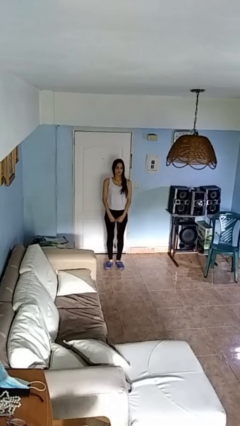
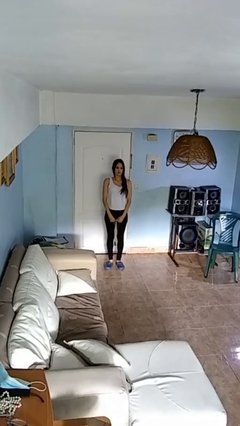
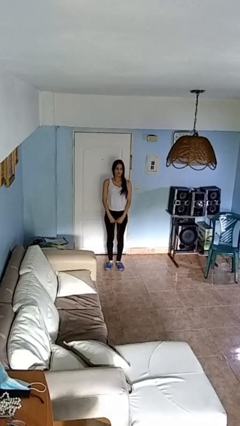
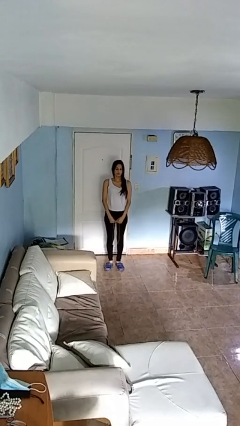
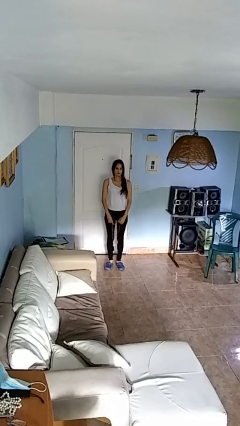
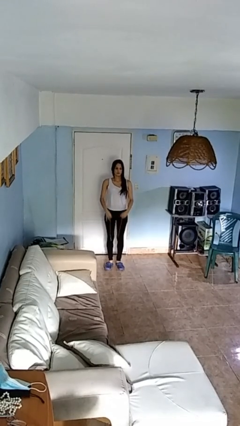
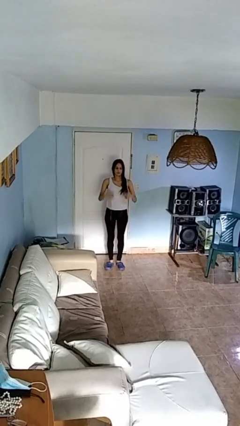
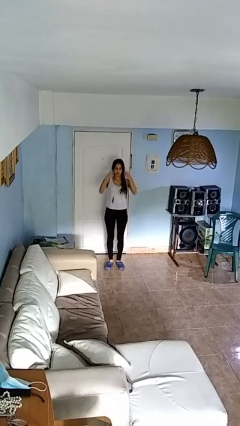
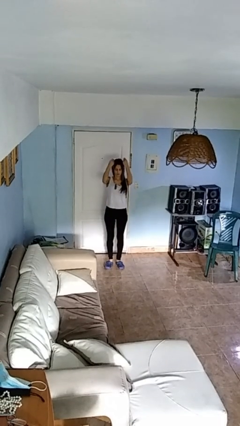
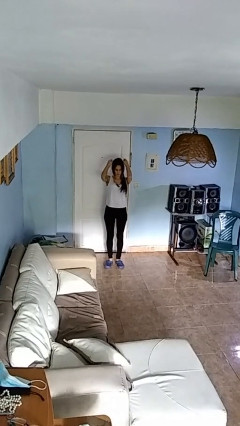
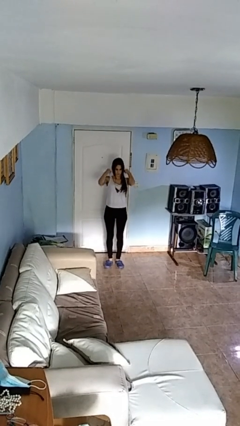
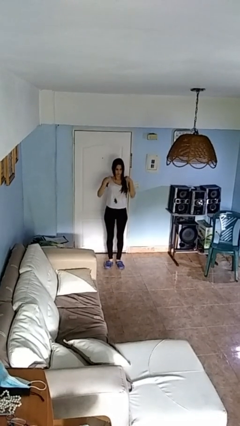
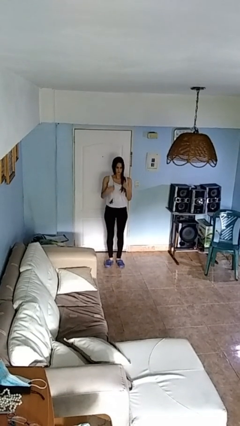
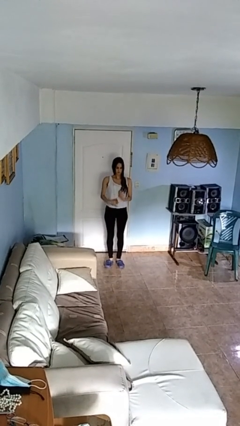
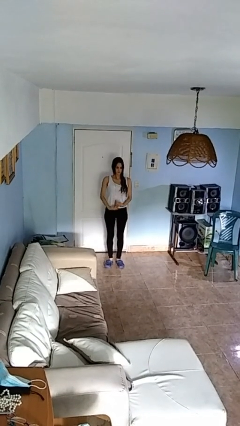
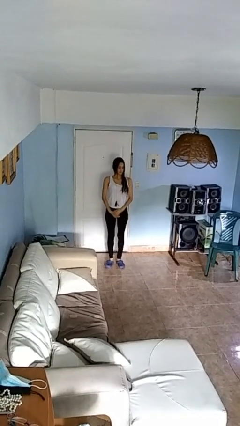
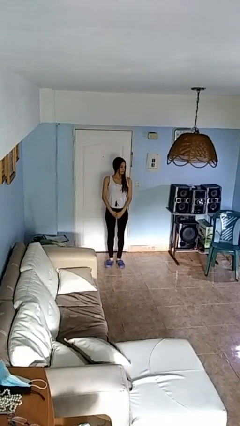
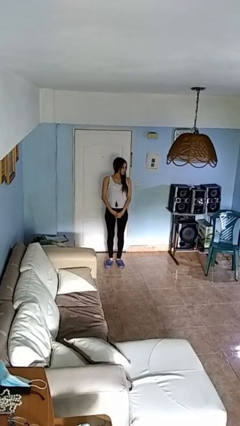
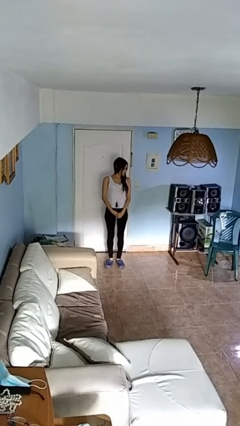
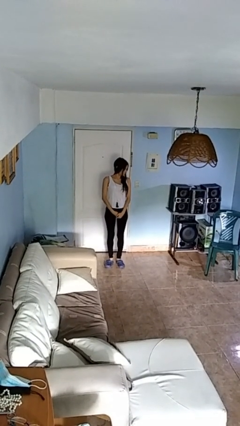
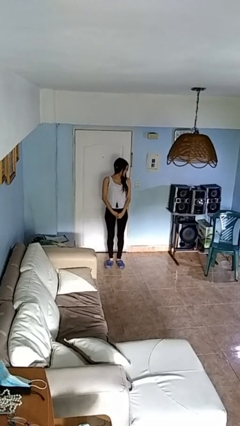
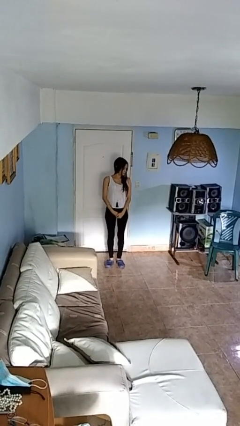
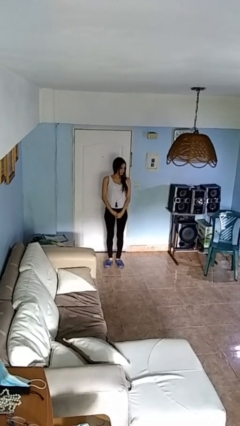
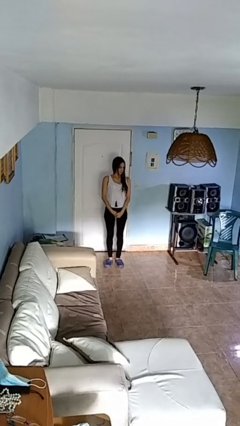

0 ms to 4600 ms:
person puts on necklace

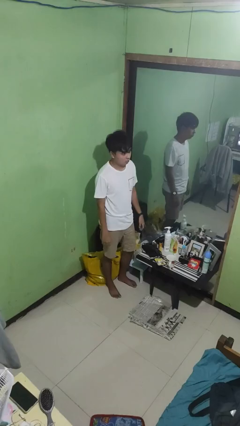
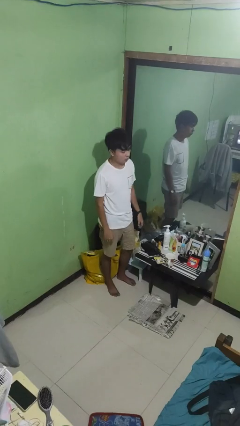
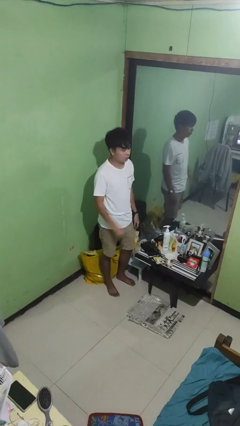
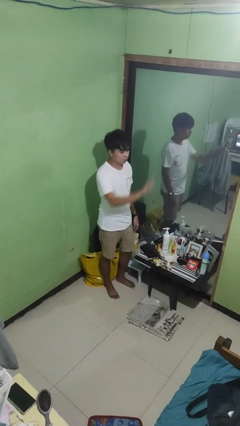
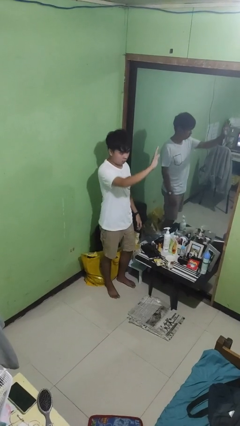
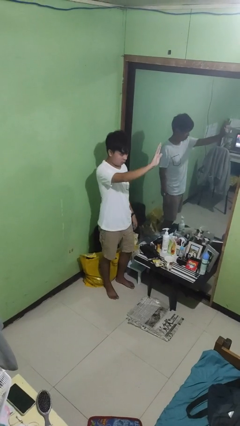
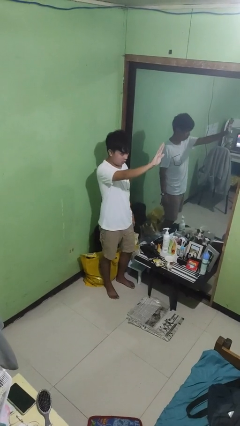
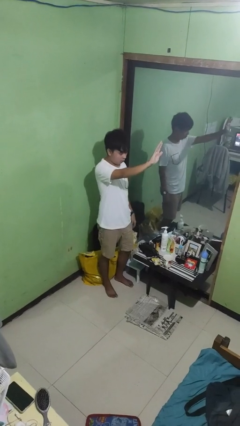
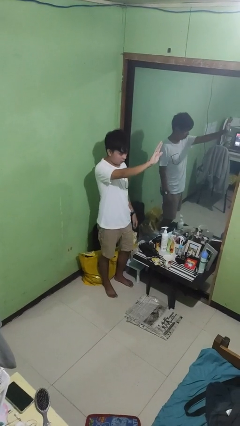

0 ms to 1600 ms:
person gestures stop

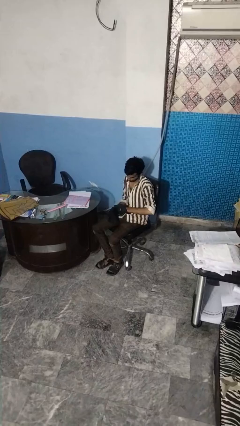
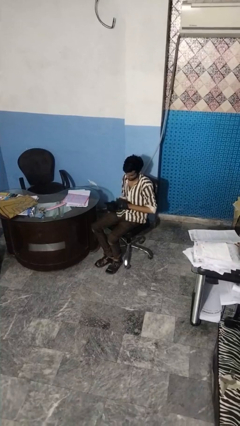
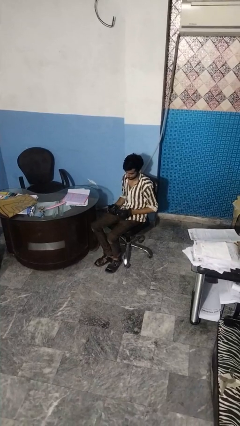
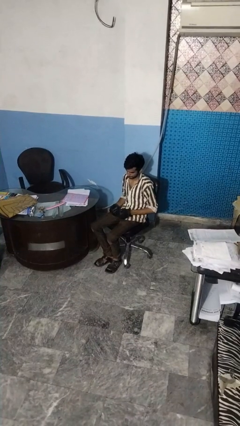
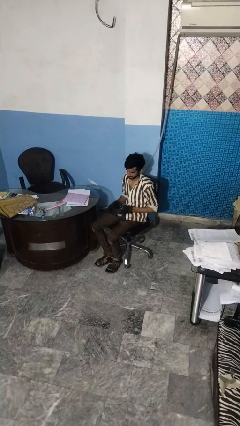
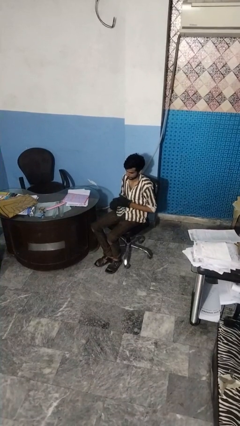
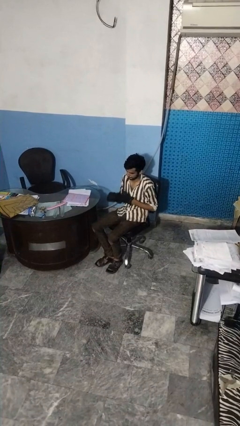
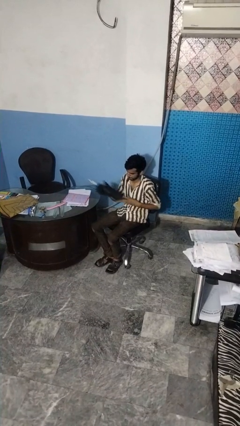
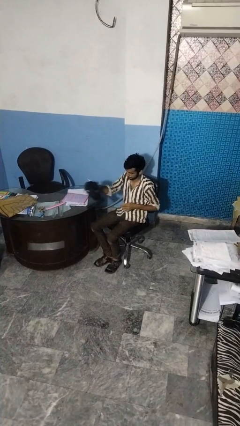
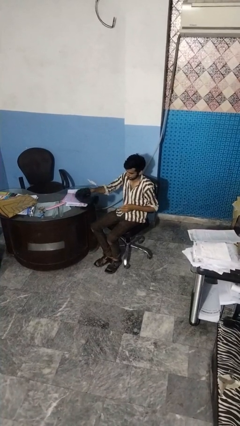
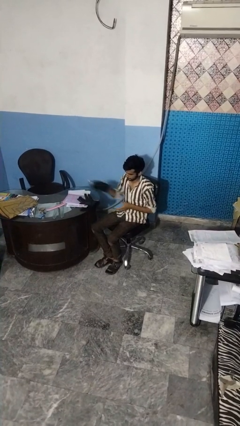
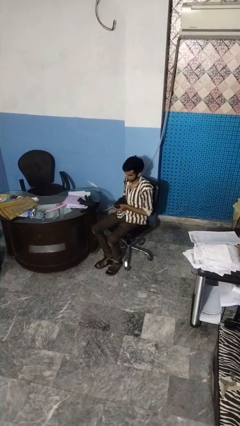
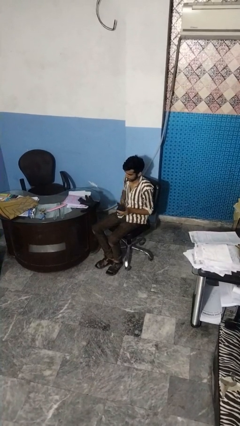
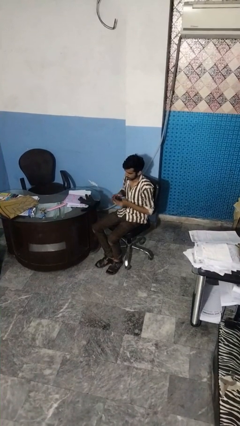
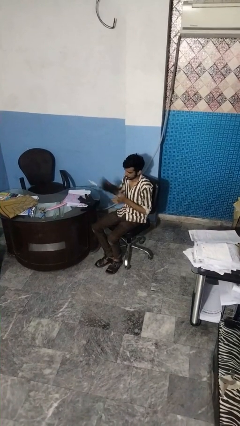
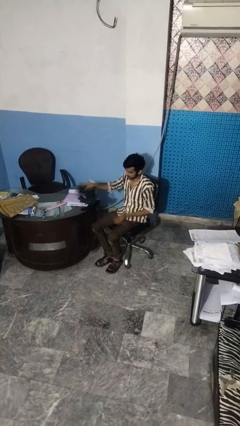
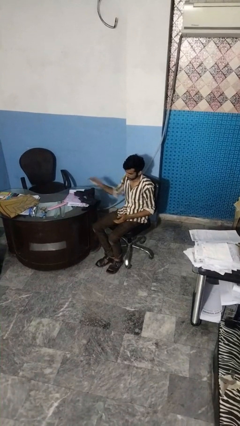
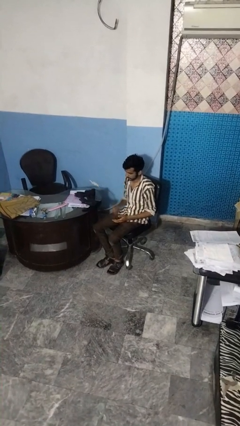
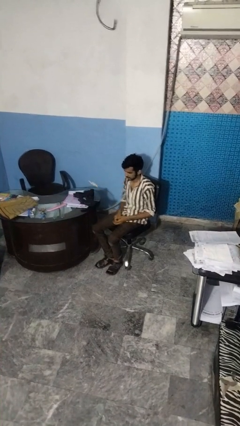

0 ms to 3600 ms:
person takes off gloves

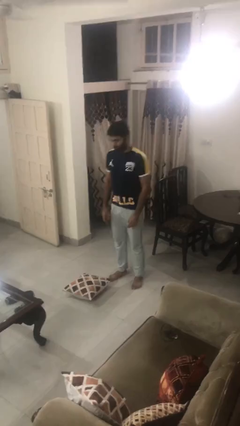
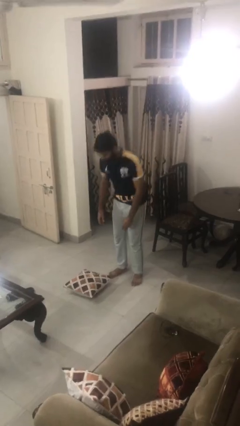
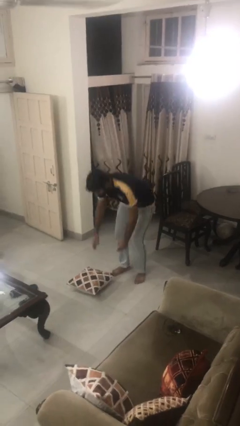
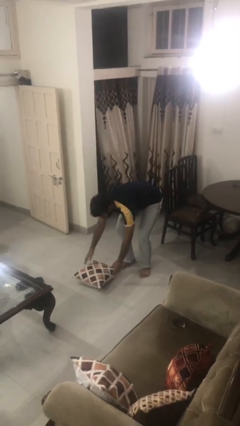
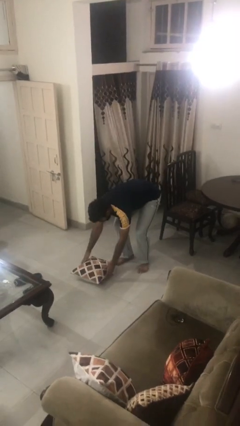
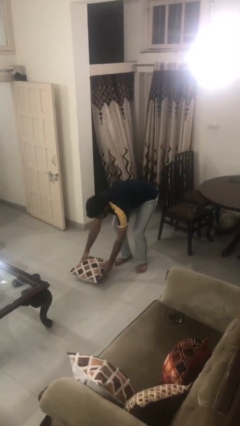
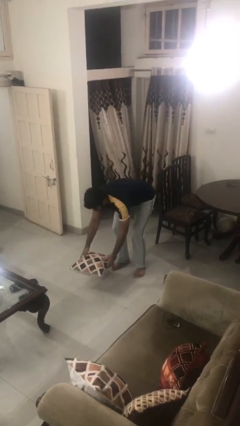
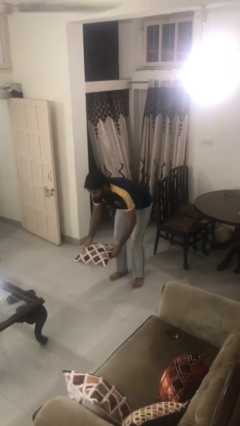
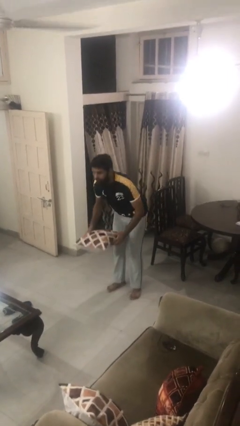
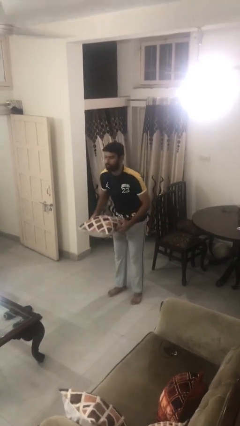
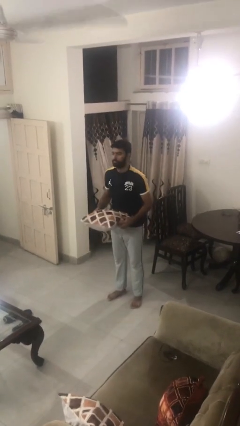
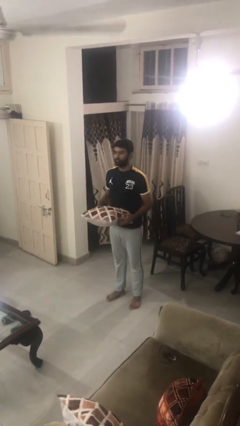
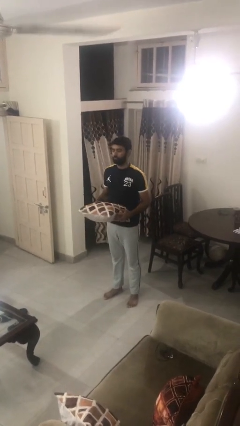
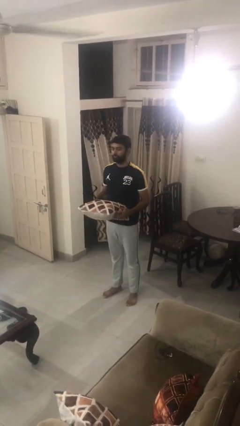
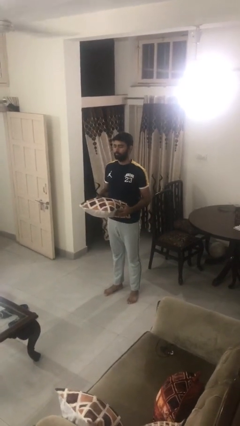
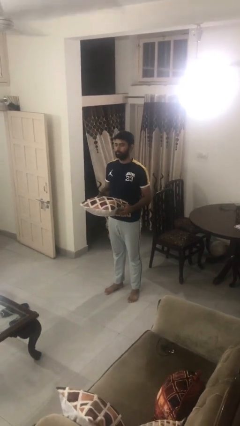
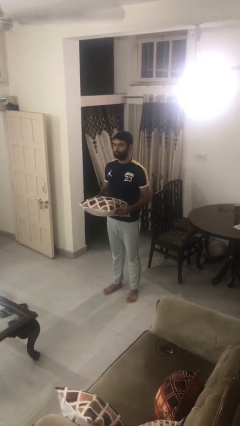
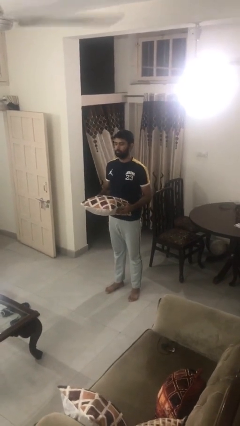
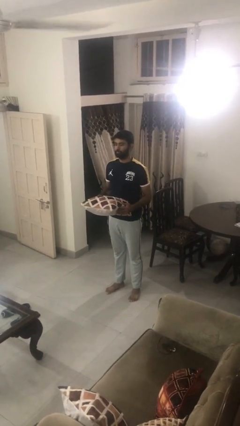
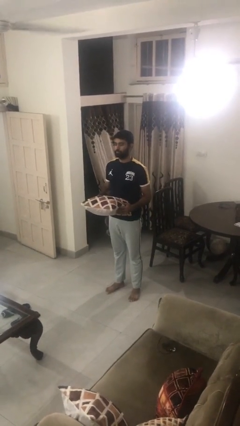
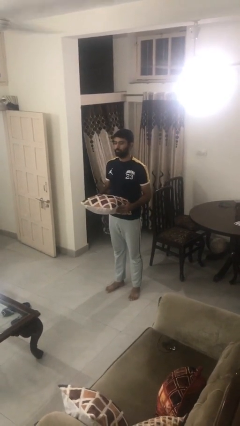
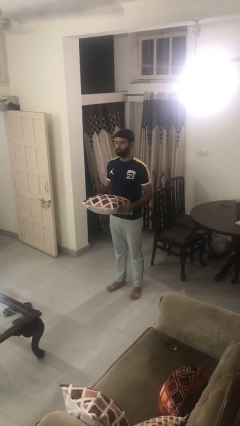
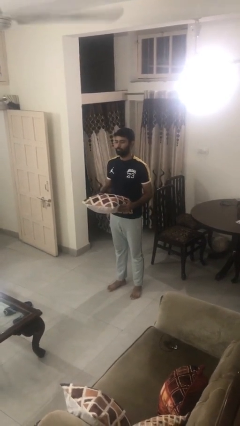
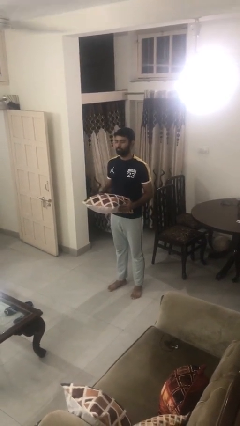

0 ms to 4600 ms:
person picks up object from floor

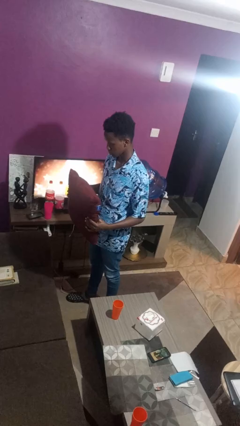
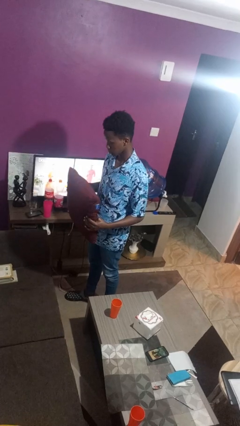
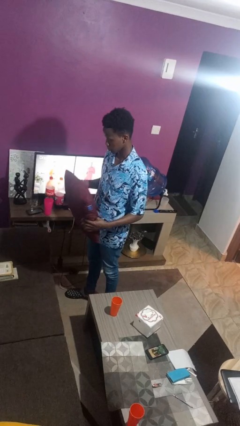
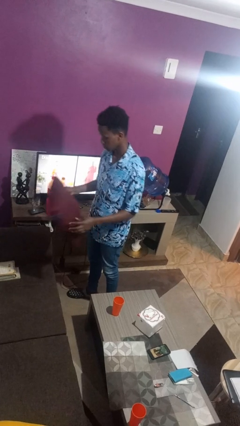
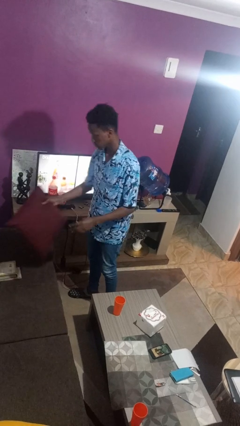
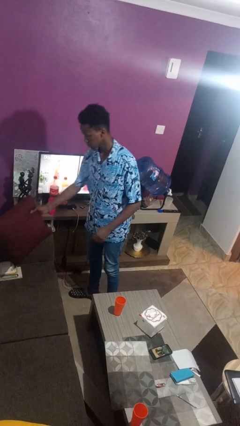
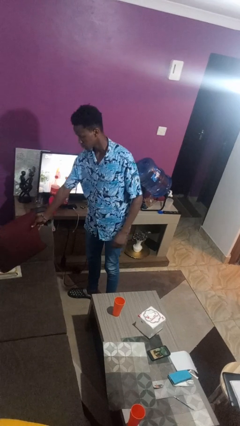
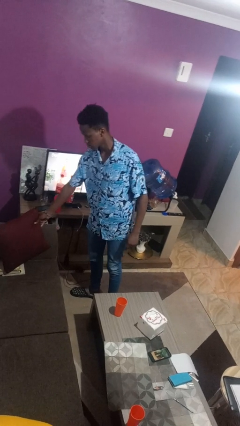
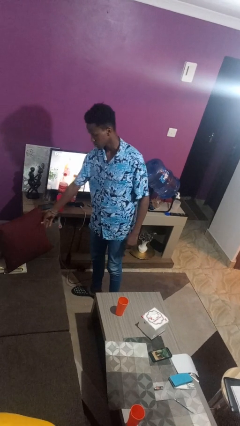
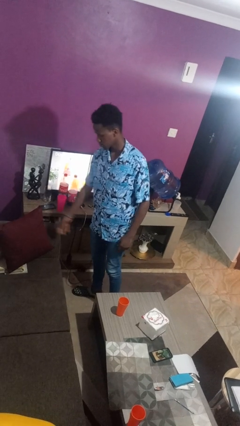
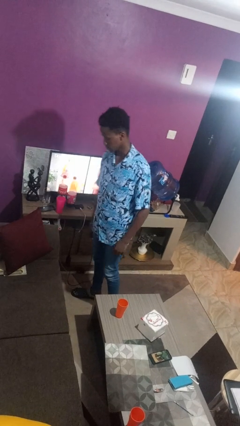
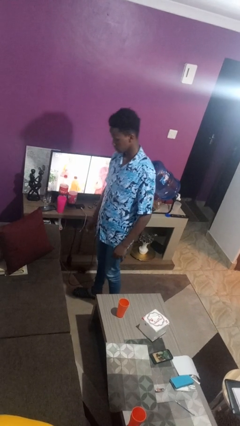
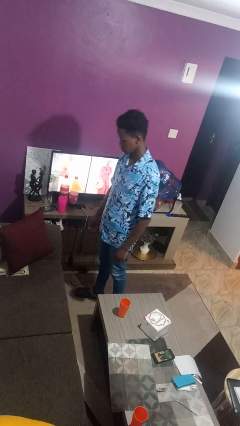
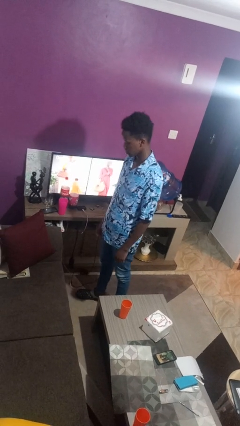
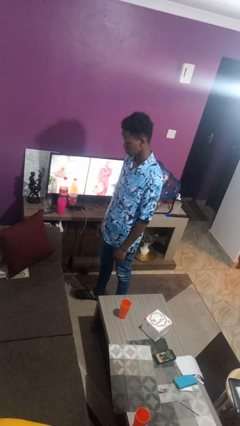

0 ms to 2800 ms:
person puts down object on couch

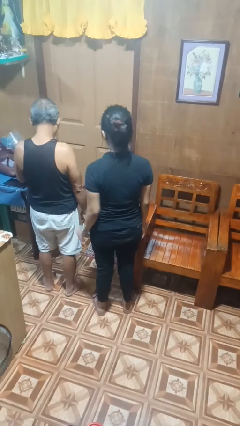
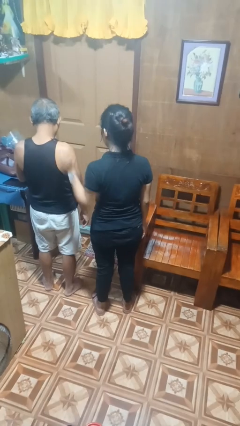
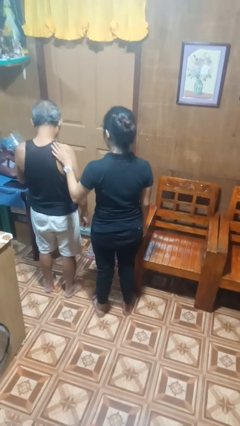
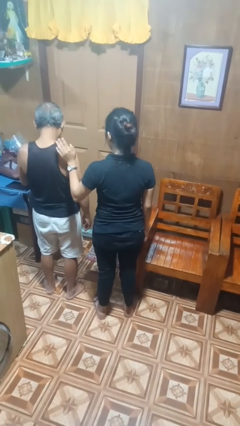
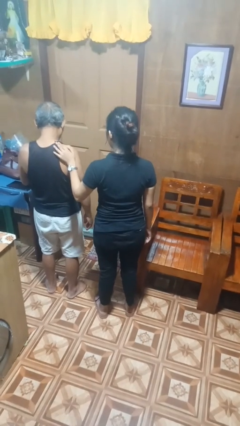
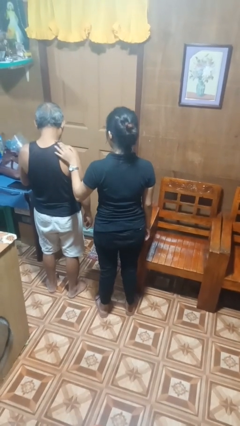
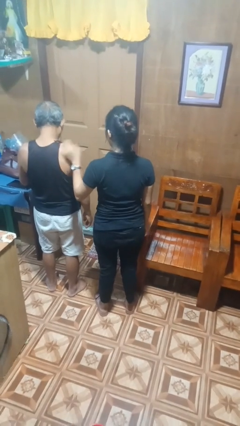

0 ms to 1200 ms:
person pounds shoulders of person
